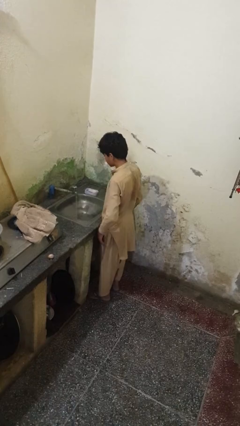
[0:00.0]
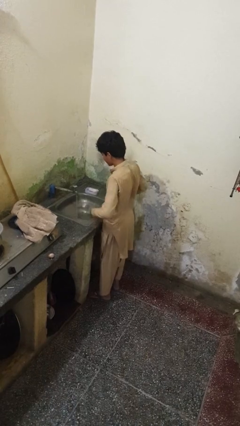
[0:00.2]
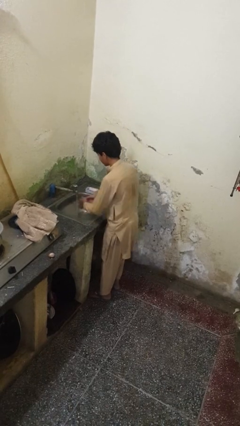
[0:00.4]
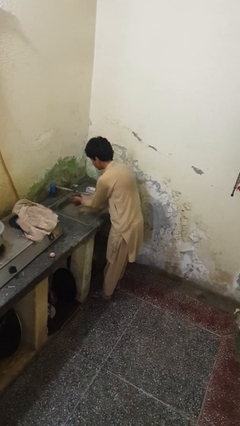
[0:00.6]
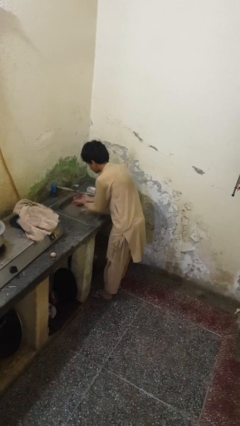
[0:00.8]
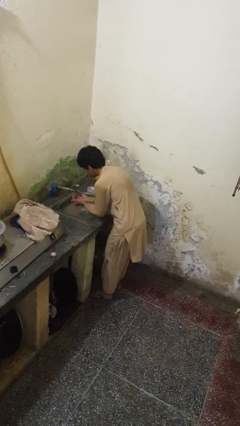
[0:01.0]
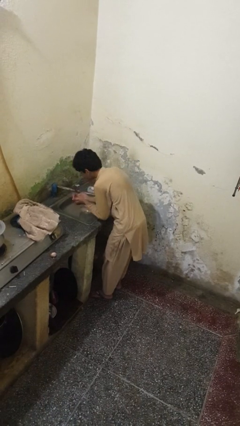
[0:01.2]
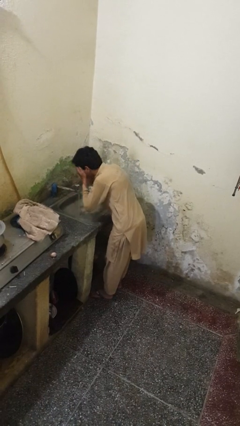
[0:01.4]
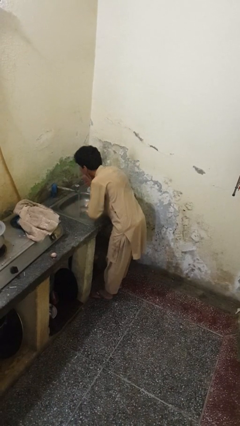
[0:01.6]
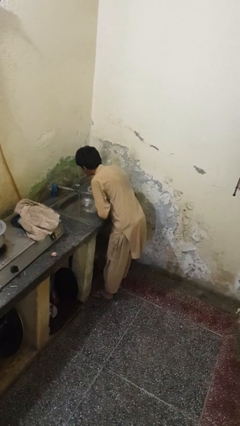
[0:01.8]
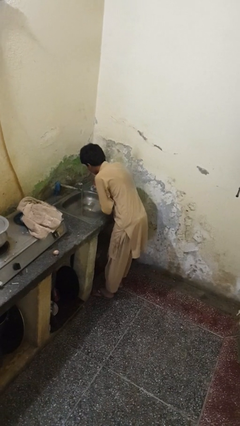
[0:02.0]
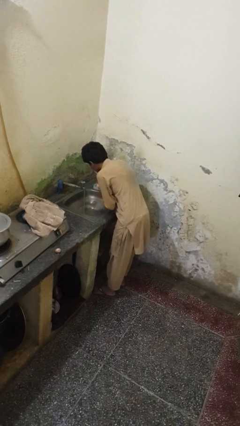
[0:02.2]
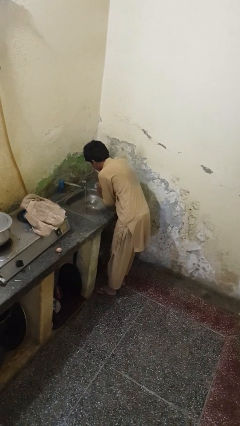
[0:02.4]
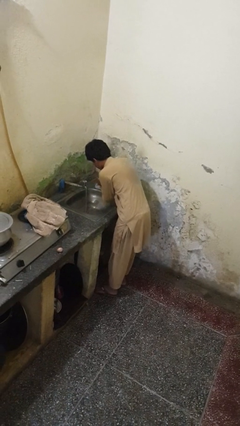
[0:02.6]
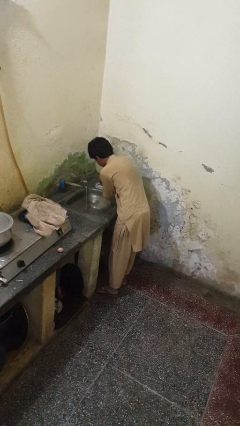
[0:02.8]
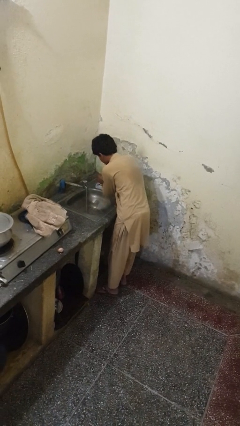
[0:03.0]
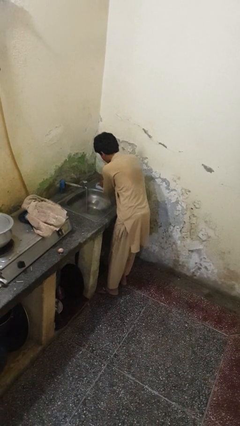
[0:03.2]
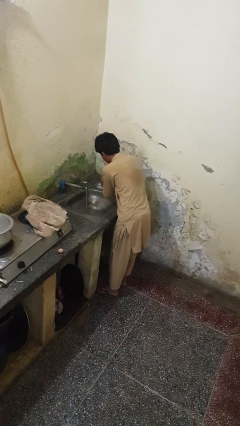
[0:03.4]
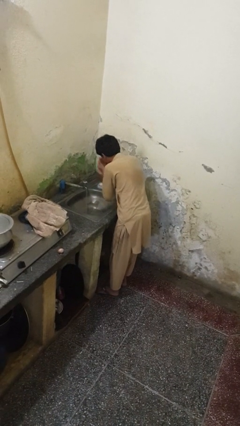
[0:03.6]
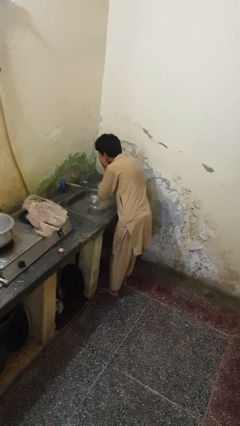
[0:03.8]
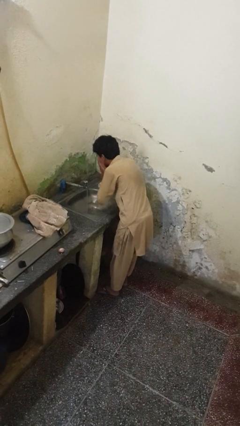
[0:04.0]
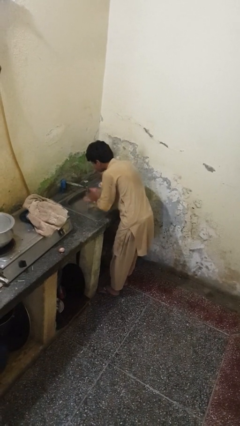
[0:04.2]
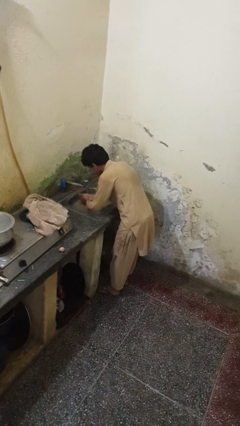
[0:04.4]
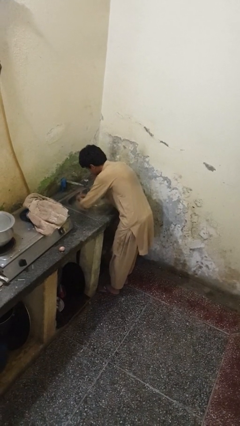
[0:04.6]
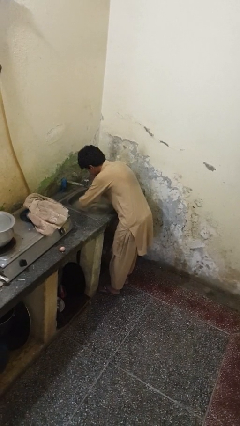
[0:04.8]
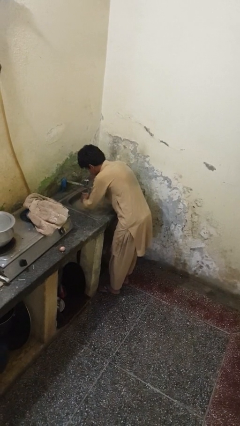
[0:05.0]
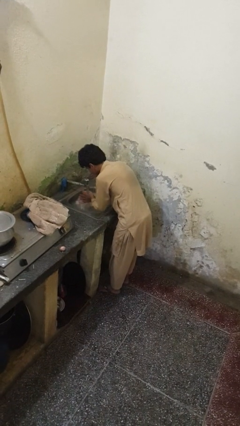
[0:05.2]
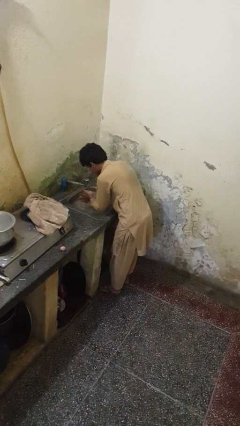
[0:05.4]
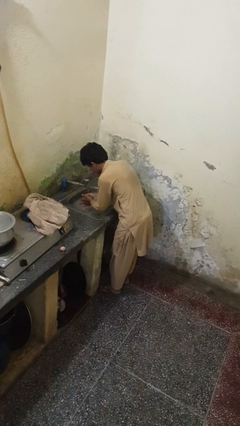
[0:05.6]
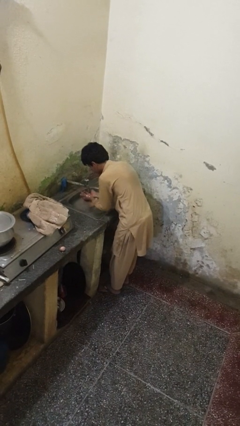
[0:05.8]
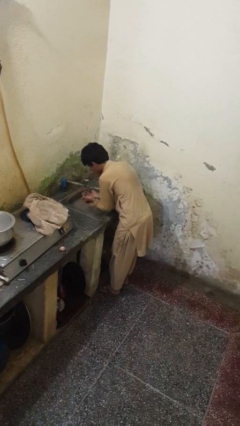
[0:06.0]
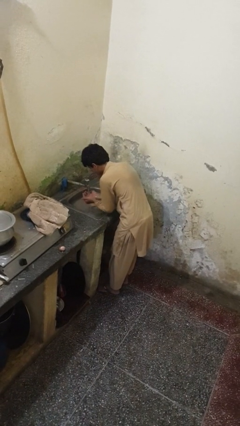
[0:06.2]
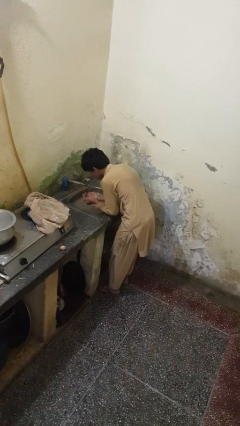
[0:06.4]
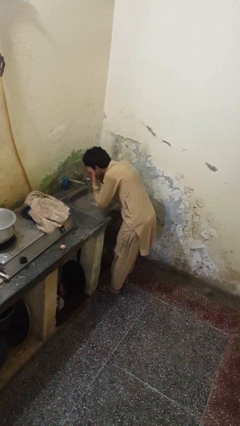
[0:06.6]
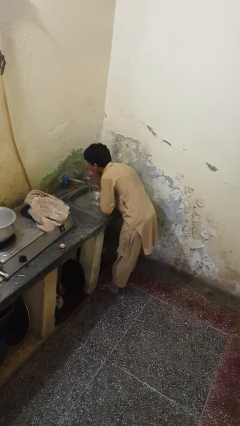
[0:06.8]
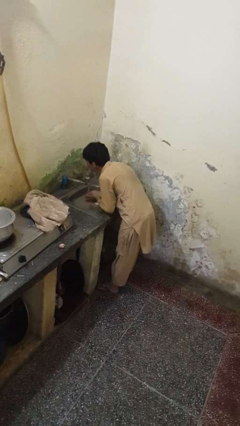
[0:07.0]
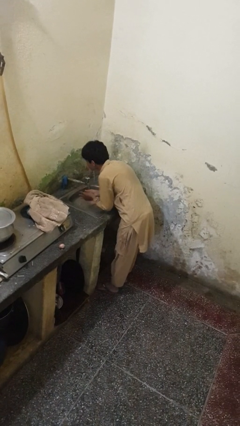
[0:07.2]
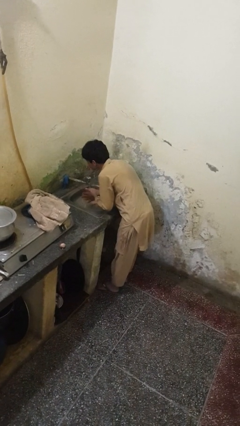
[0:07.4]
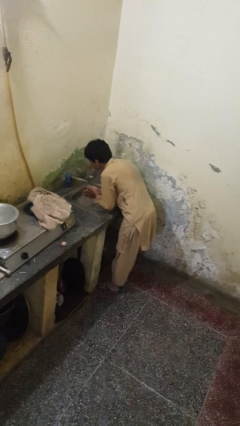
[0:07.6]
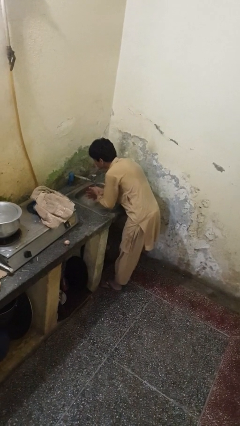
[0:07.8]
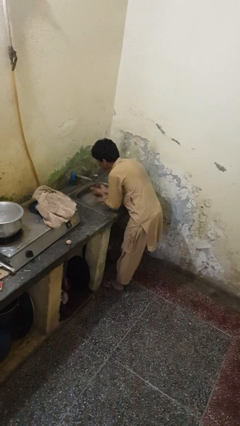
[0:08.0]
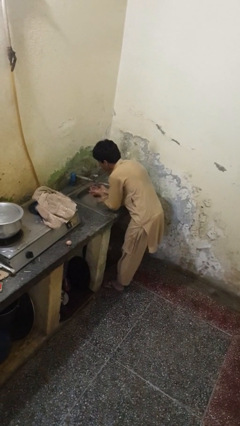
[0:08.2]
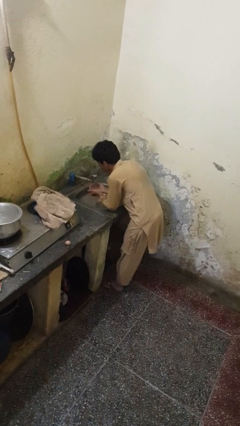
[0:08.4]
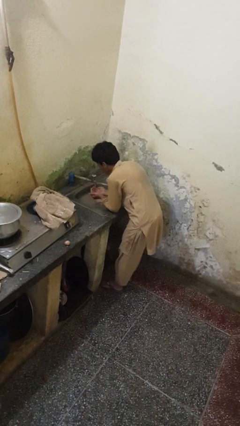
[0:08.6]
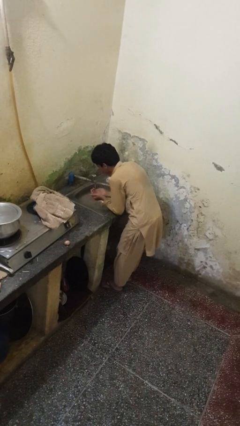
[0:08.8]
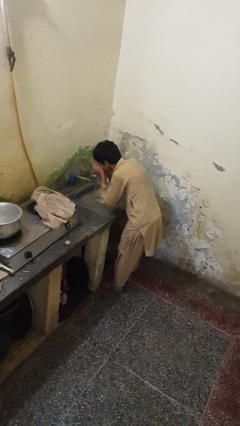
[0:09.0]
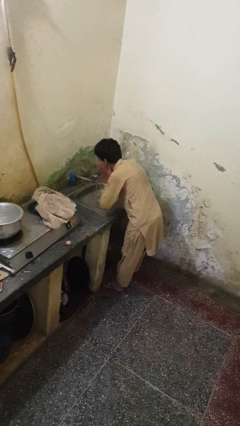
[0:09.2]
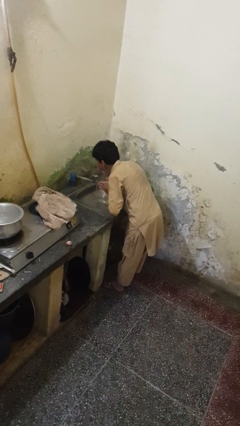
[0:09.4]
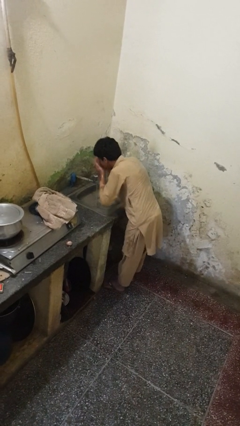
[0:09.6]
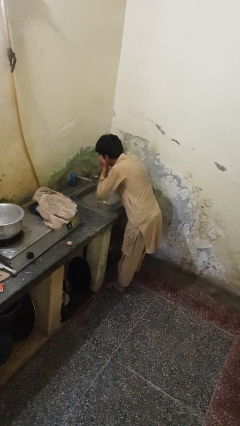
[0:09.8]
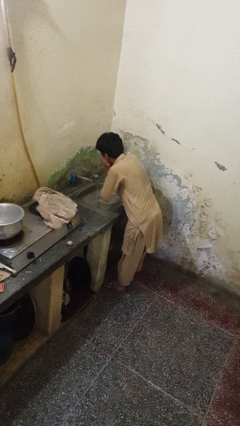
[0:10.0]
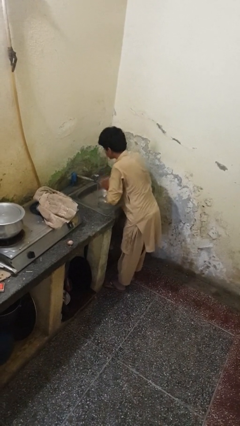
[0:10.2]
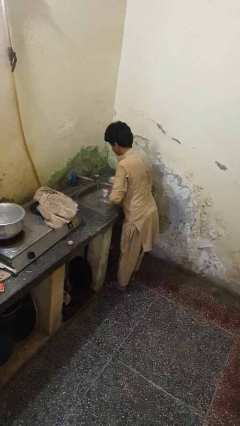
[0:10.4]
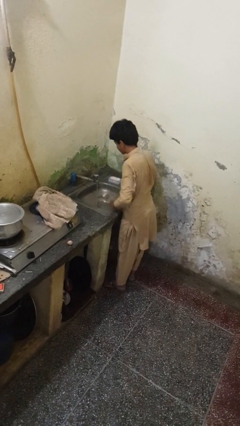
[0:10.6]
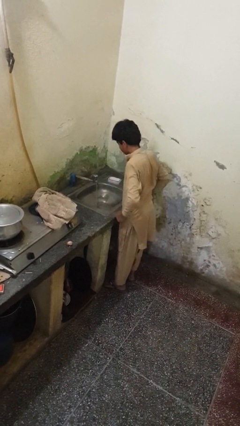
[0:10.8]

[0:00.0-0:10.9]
person washes face

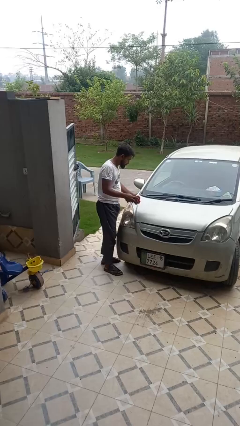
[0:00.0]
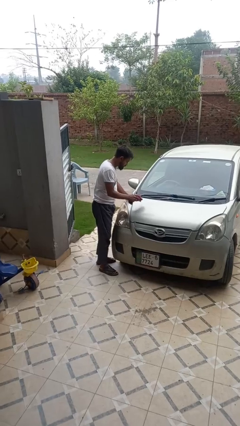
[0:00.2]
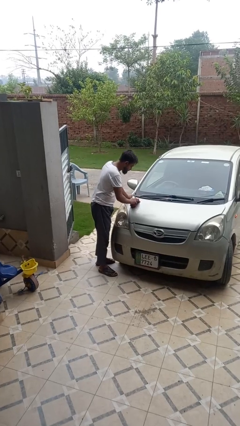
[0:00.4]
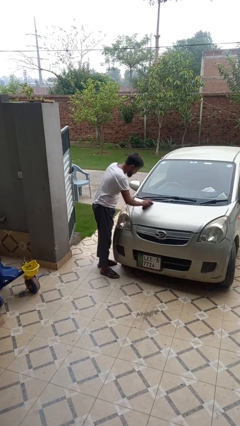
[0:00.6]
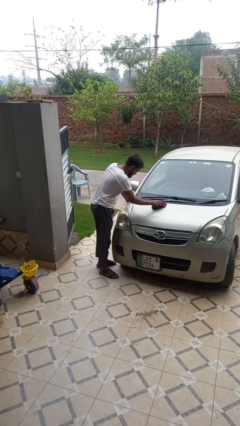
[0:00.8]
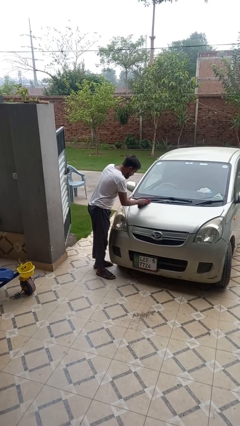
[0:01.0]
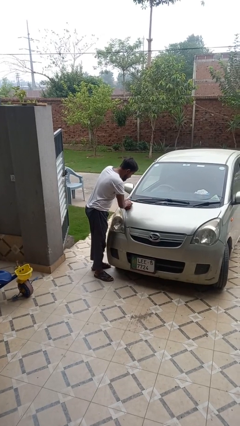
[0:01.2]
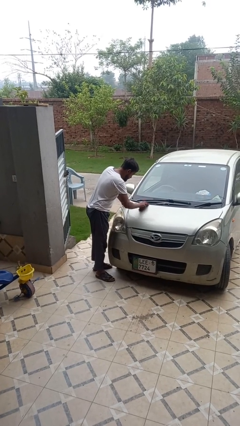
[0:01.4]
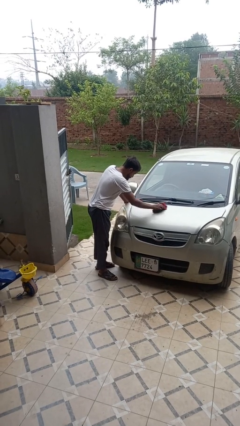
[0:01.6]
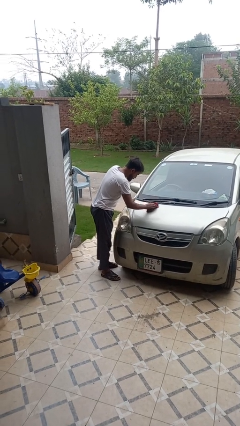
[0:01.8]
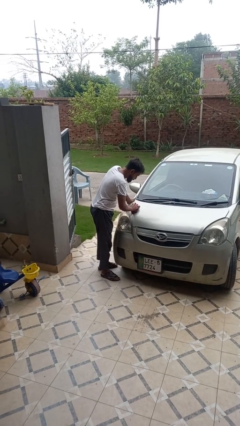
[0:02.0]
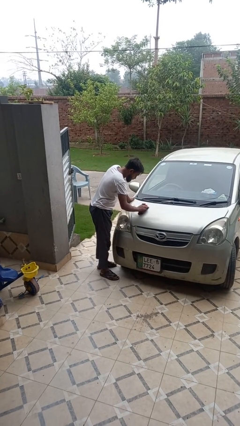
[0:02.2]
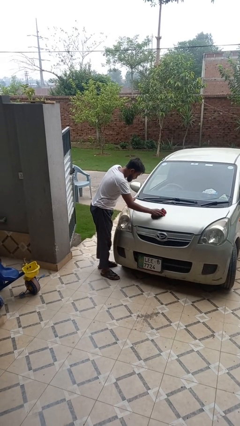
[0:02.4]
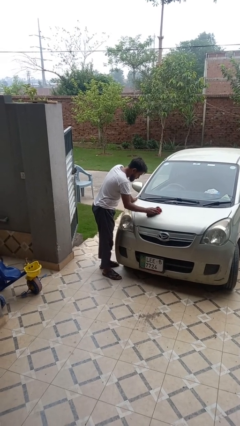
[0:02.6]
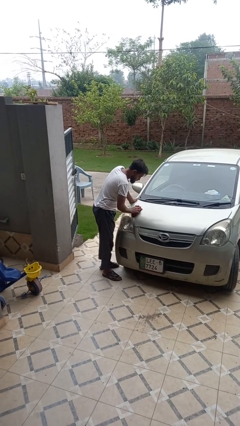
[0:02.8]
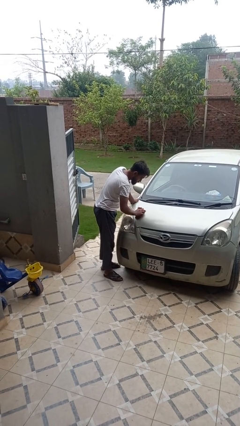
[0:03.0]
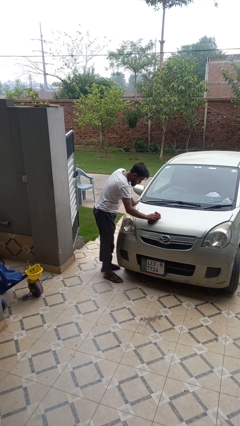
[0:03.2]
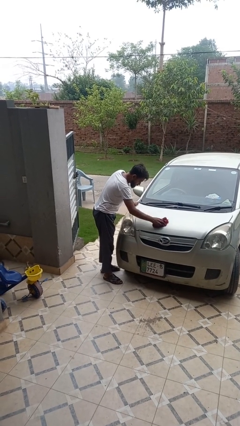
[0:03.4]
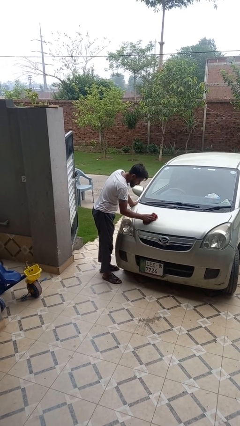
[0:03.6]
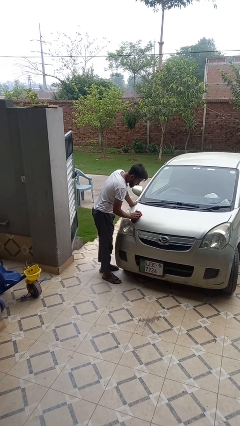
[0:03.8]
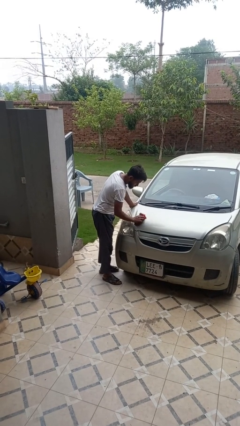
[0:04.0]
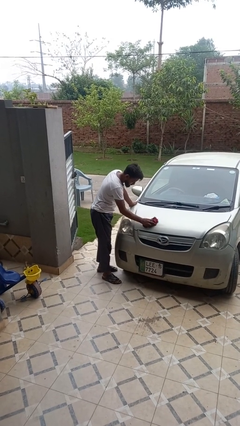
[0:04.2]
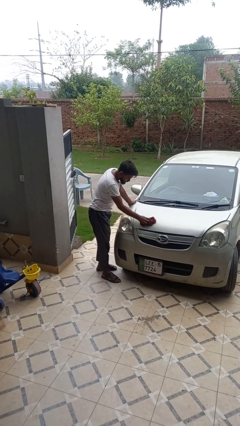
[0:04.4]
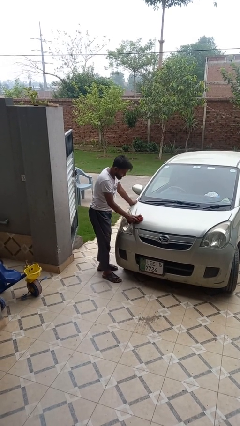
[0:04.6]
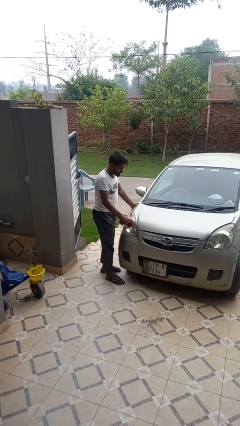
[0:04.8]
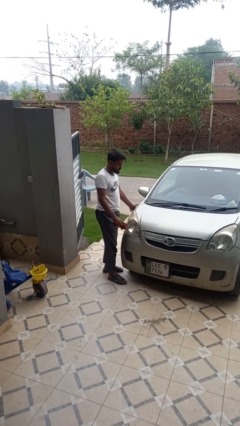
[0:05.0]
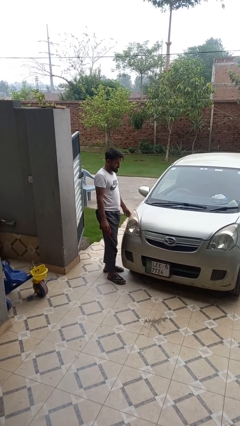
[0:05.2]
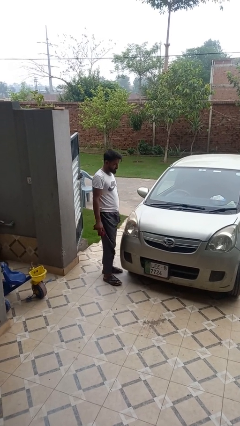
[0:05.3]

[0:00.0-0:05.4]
person polishes car with rag

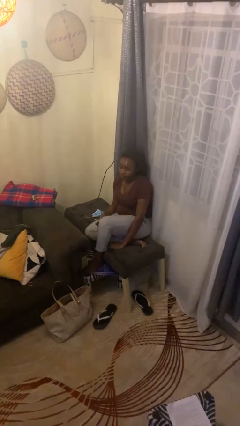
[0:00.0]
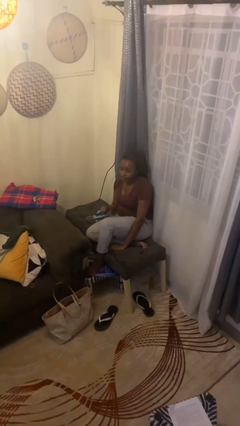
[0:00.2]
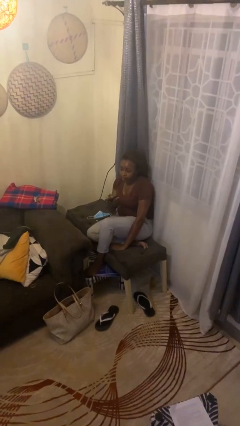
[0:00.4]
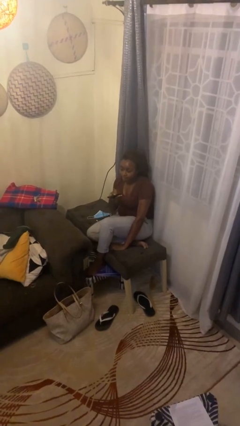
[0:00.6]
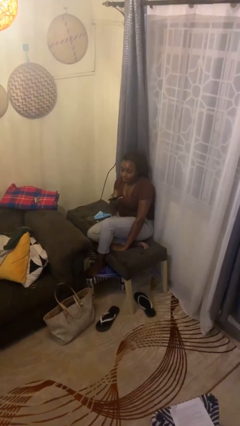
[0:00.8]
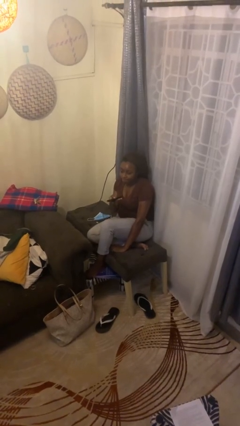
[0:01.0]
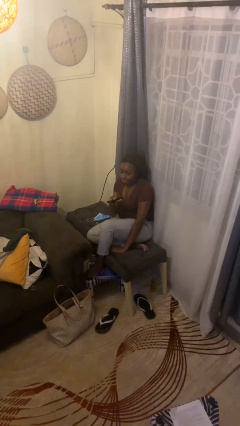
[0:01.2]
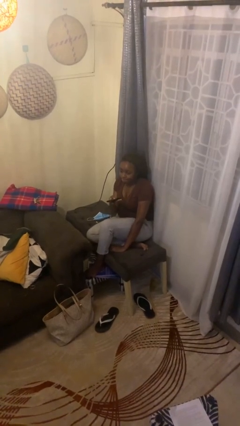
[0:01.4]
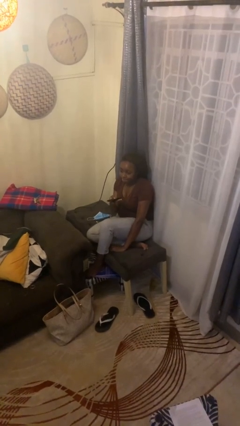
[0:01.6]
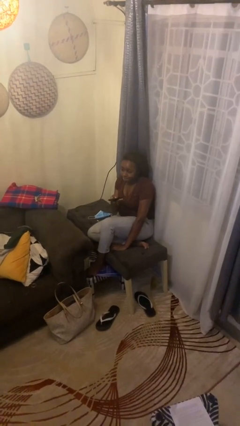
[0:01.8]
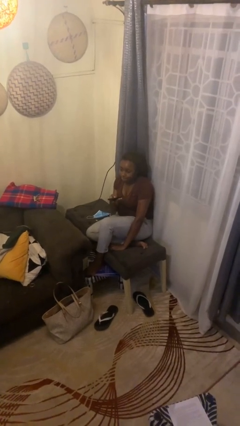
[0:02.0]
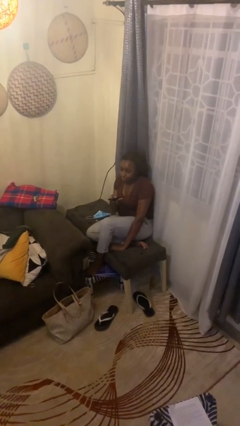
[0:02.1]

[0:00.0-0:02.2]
person uses television remote
